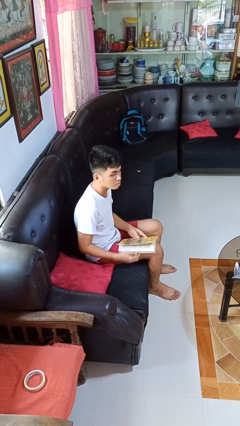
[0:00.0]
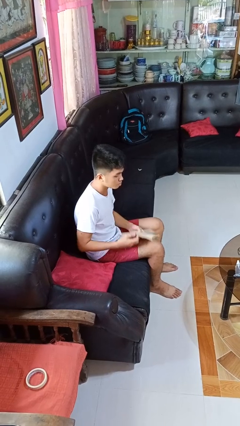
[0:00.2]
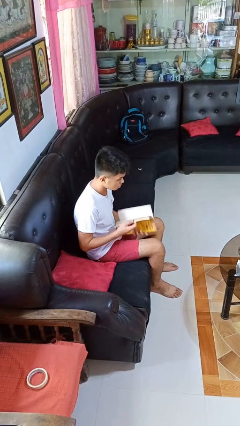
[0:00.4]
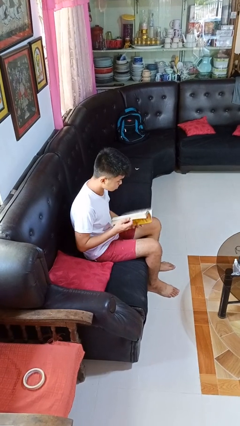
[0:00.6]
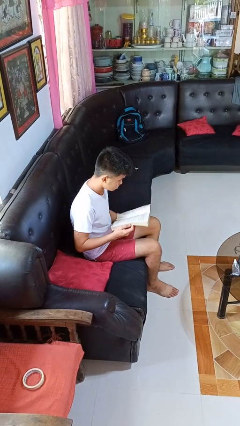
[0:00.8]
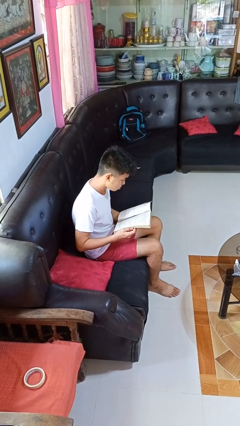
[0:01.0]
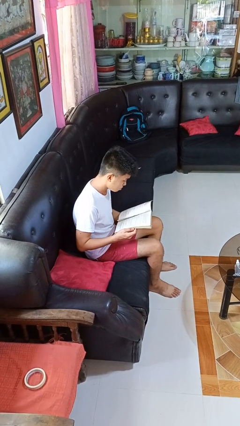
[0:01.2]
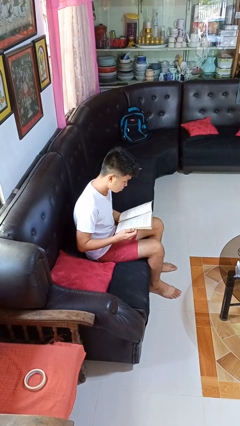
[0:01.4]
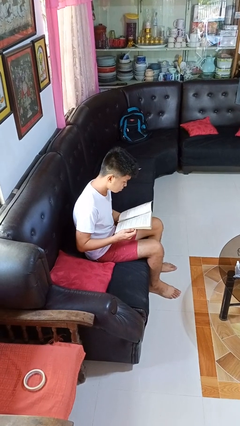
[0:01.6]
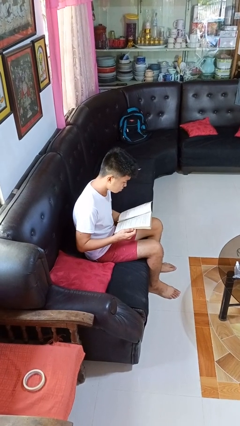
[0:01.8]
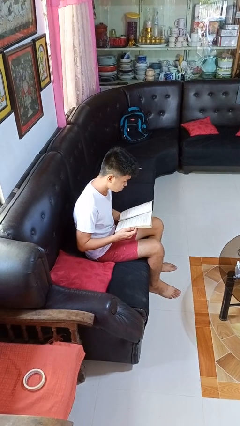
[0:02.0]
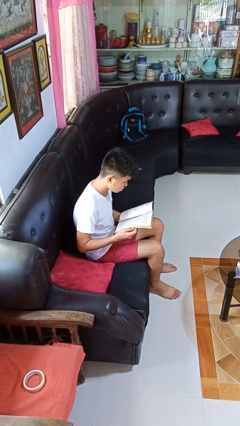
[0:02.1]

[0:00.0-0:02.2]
person reads book

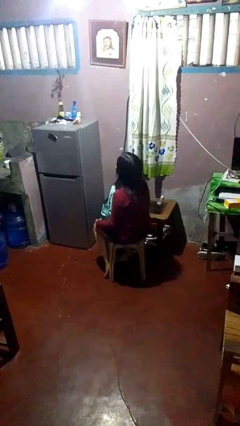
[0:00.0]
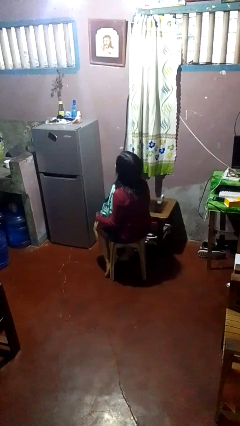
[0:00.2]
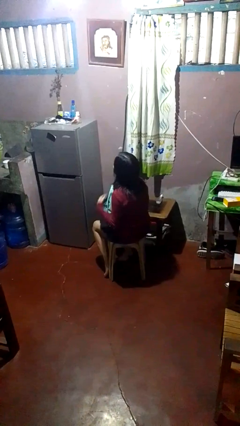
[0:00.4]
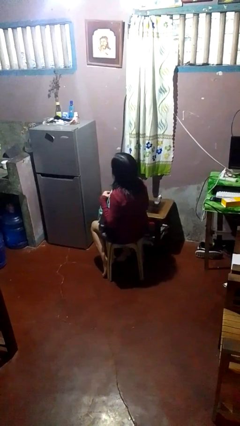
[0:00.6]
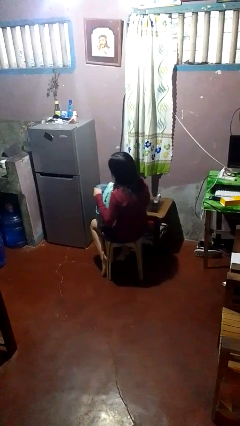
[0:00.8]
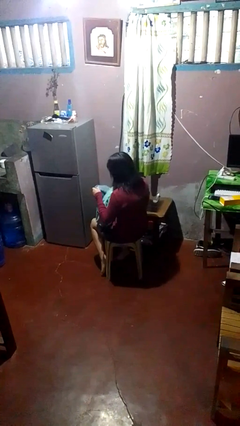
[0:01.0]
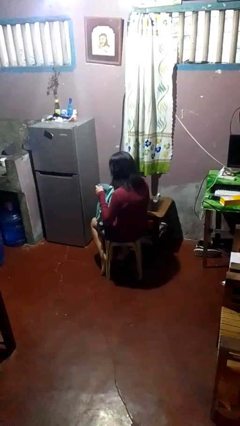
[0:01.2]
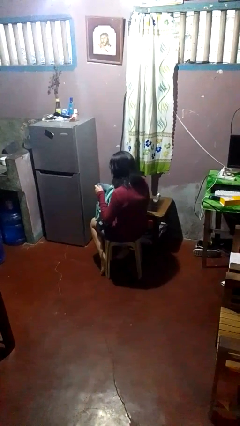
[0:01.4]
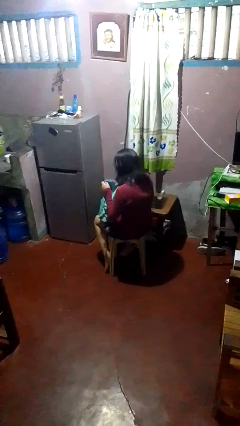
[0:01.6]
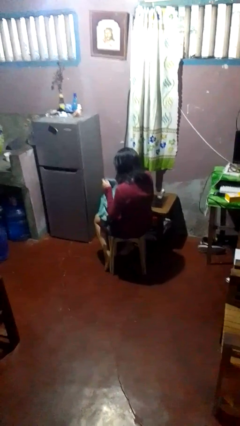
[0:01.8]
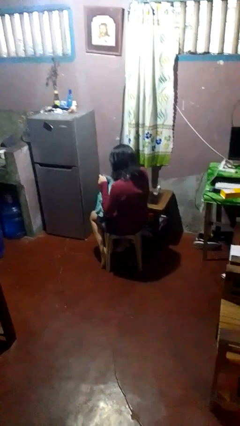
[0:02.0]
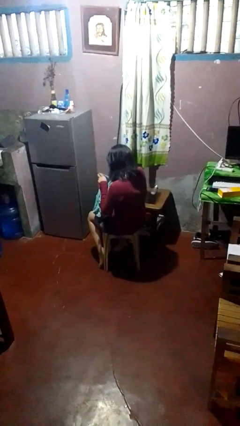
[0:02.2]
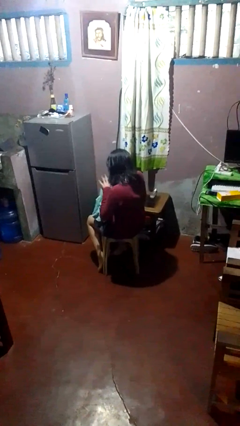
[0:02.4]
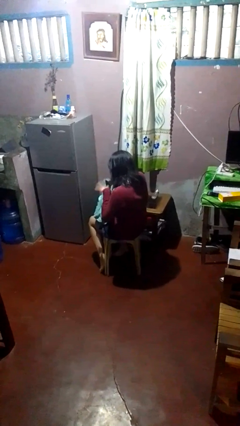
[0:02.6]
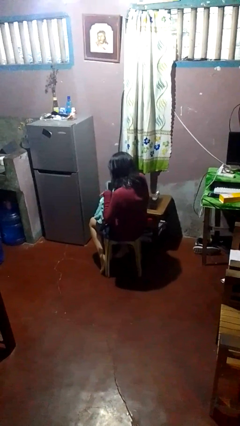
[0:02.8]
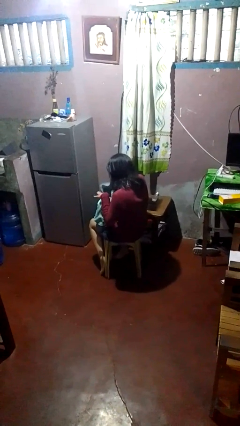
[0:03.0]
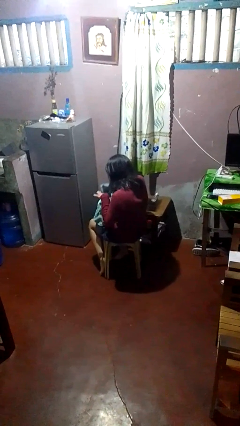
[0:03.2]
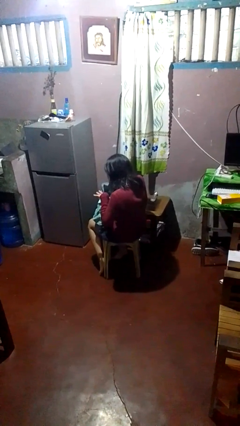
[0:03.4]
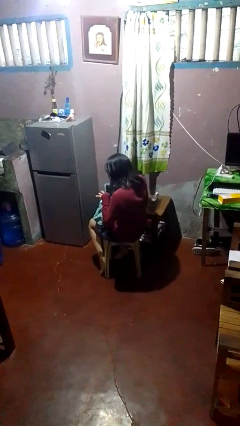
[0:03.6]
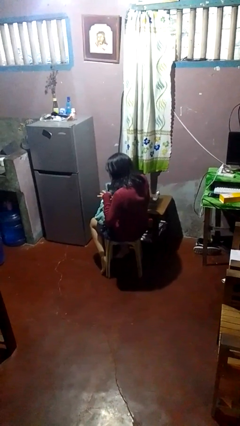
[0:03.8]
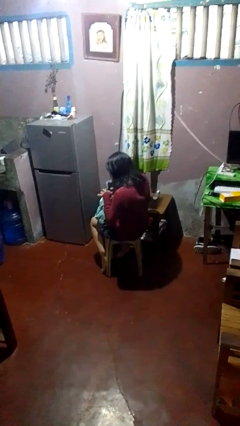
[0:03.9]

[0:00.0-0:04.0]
person searches in backpack

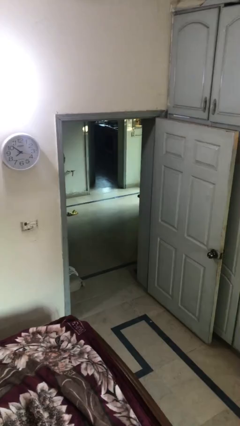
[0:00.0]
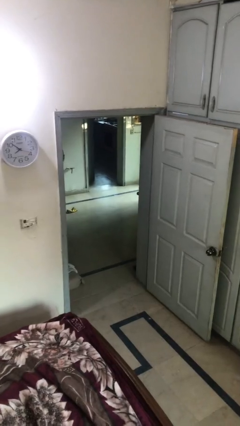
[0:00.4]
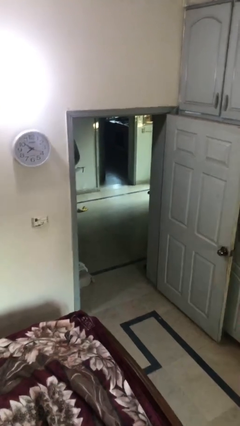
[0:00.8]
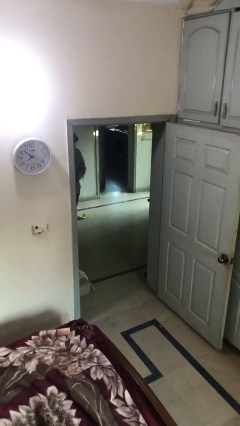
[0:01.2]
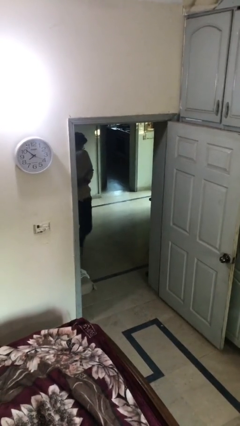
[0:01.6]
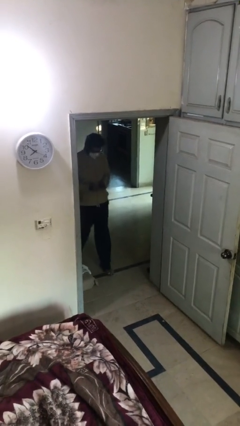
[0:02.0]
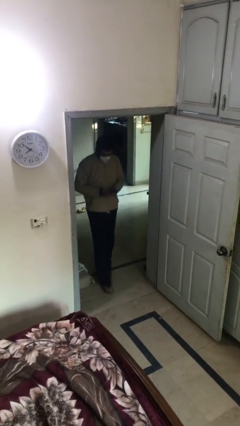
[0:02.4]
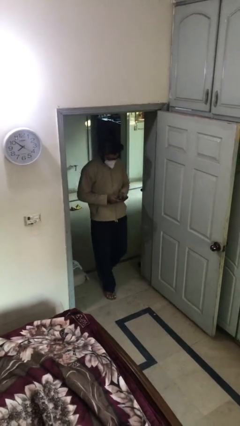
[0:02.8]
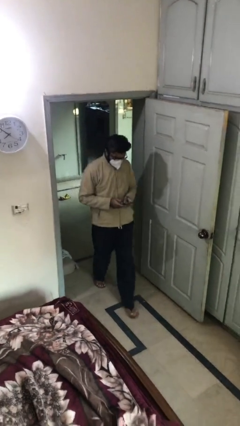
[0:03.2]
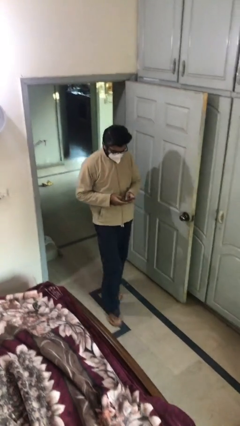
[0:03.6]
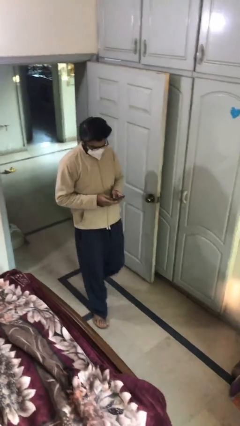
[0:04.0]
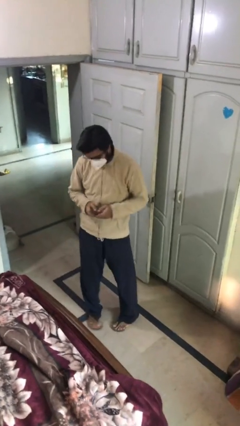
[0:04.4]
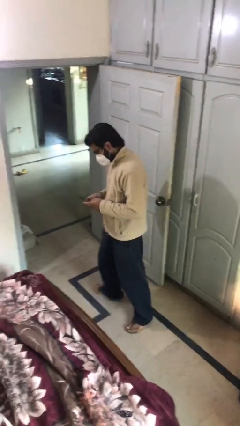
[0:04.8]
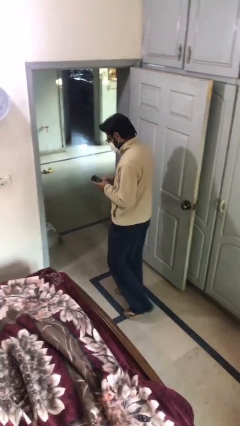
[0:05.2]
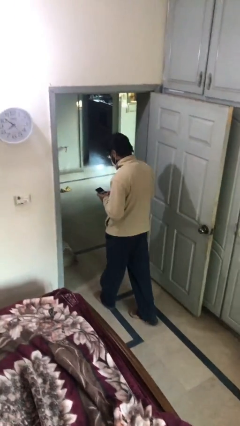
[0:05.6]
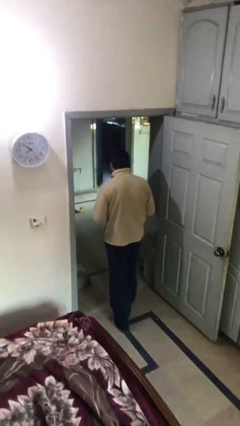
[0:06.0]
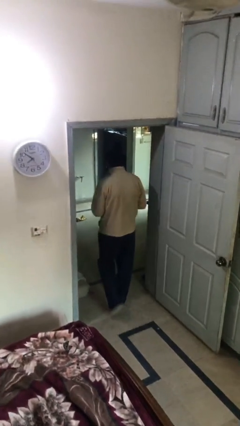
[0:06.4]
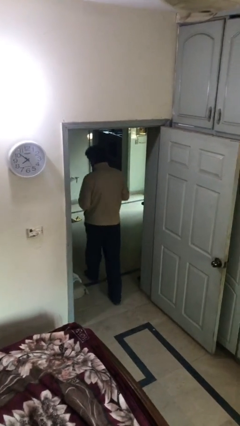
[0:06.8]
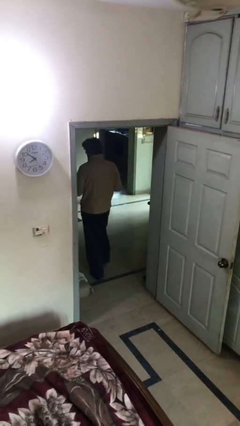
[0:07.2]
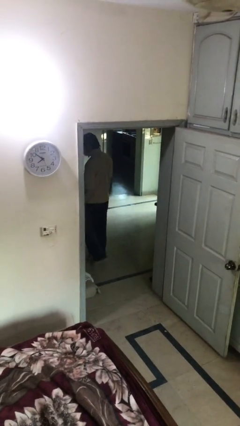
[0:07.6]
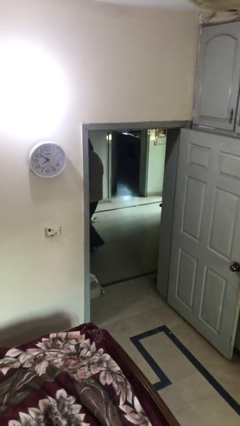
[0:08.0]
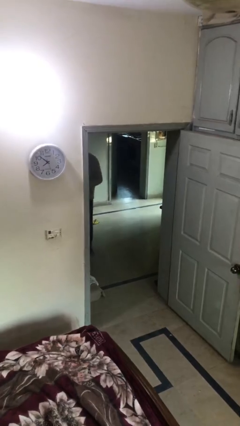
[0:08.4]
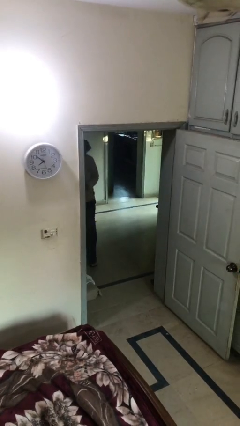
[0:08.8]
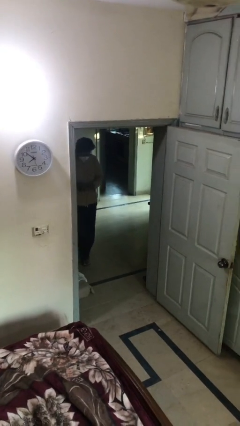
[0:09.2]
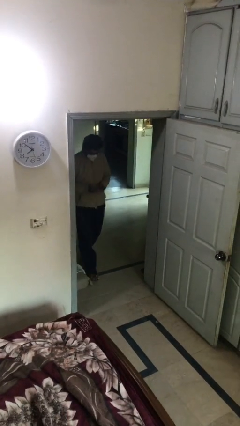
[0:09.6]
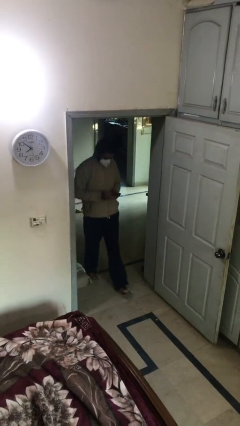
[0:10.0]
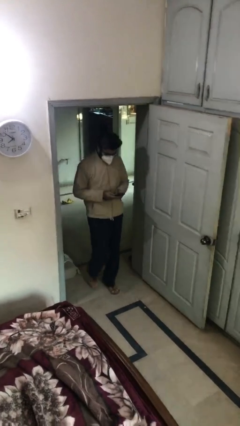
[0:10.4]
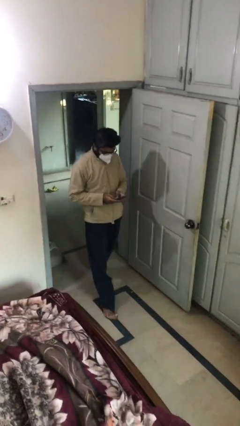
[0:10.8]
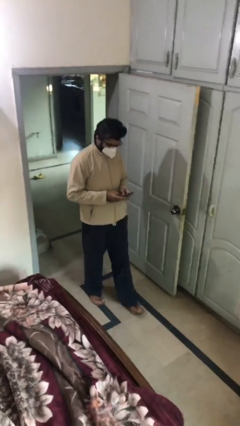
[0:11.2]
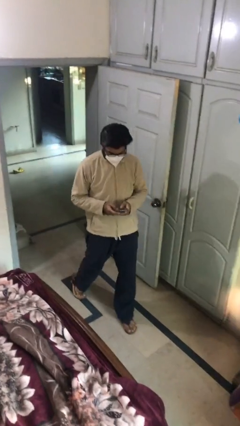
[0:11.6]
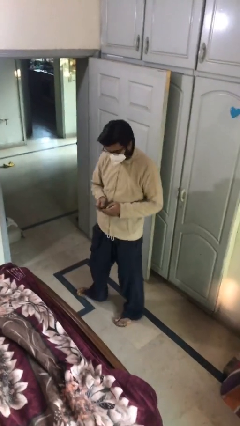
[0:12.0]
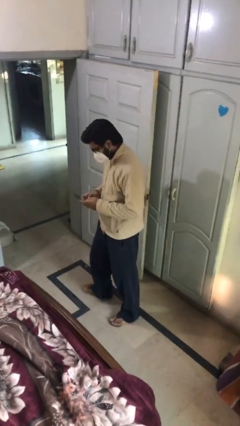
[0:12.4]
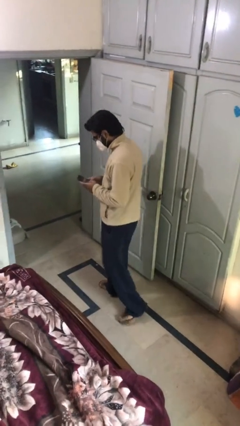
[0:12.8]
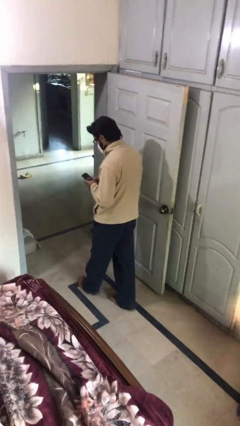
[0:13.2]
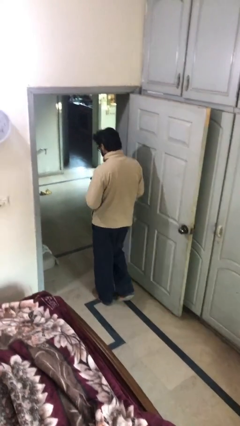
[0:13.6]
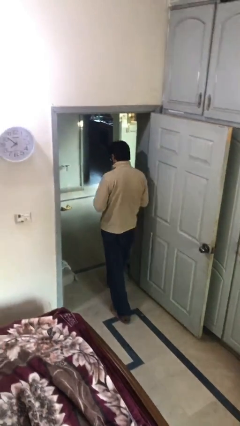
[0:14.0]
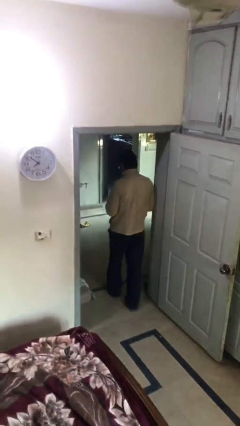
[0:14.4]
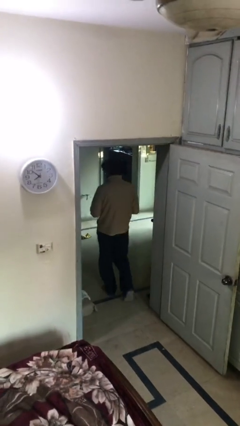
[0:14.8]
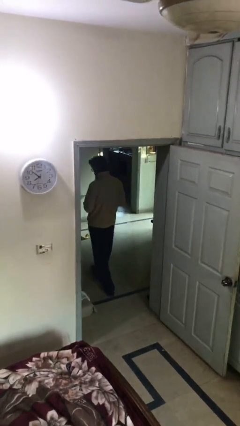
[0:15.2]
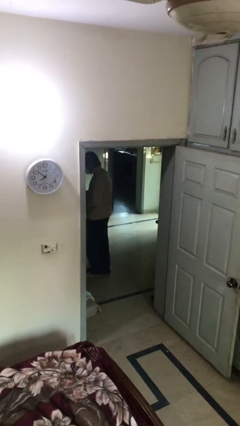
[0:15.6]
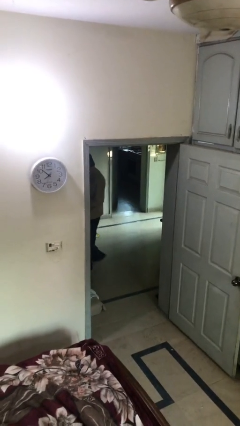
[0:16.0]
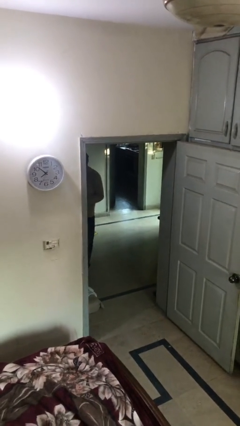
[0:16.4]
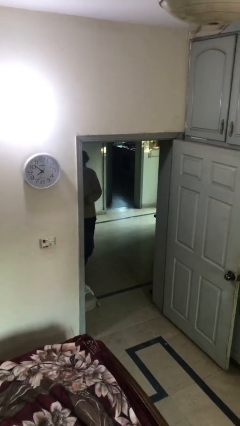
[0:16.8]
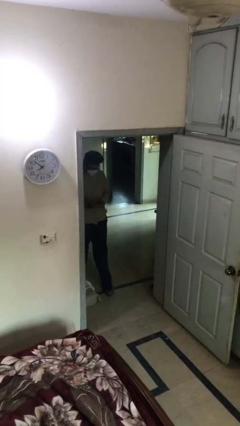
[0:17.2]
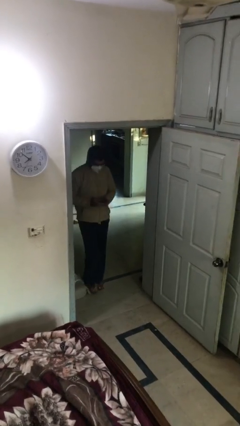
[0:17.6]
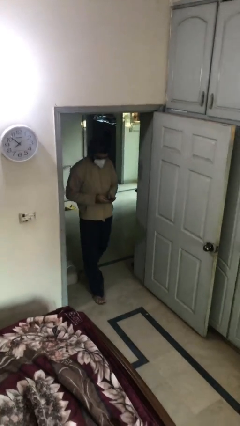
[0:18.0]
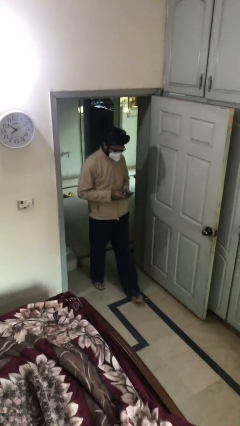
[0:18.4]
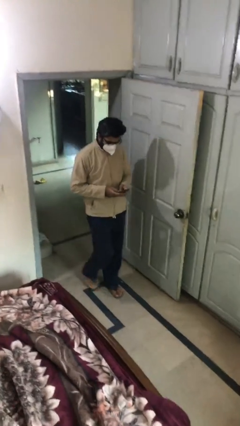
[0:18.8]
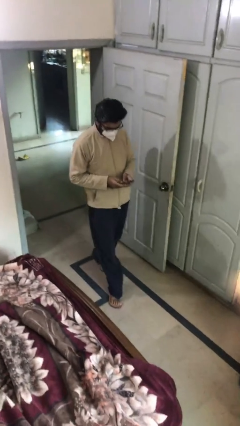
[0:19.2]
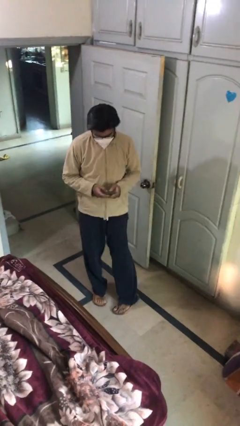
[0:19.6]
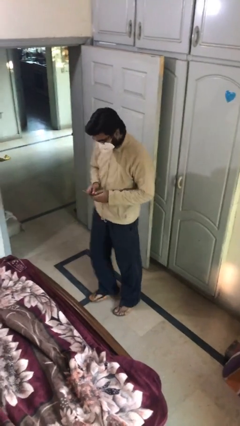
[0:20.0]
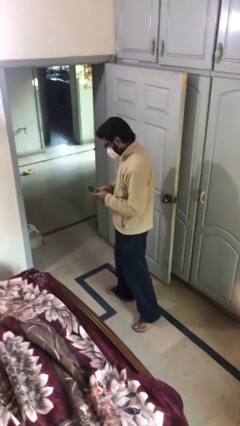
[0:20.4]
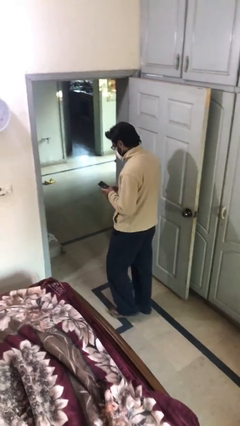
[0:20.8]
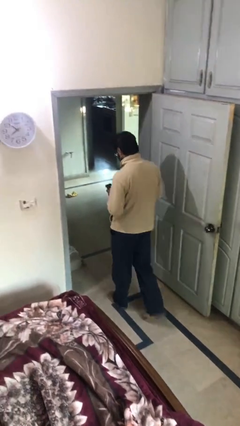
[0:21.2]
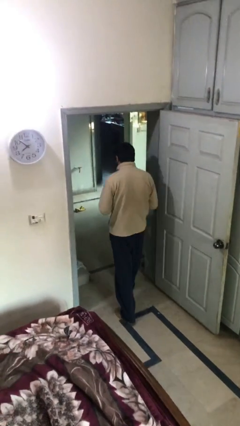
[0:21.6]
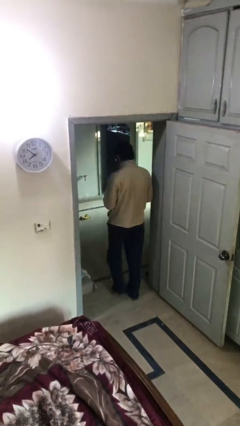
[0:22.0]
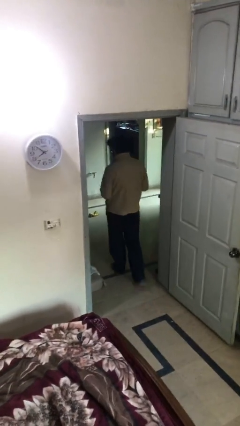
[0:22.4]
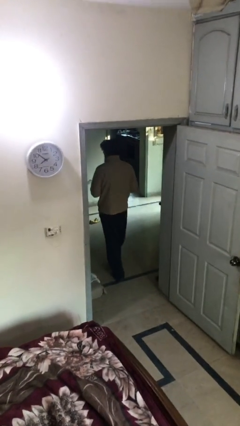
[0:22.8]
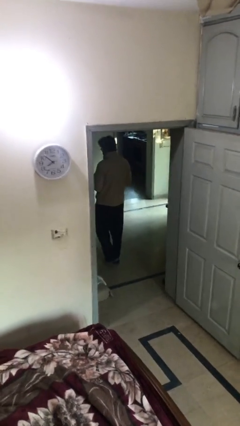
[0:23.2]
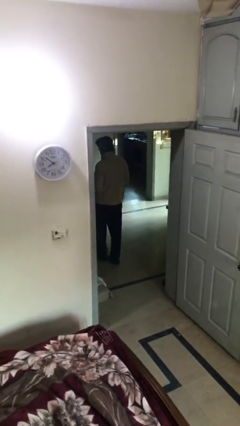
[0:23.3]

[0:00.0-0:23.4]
person texts on phone
